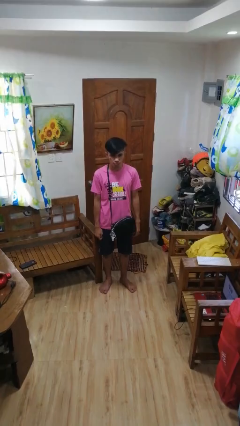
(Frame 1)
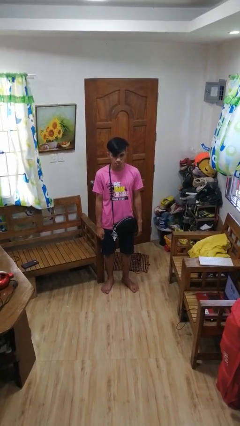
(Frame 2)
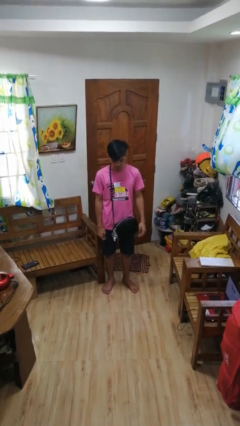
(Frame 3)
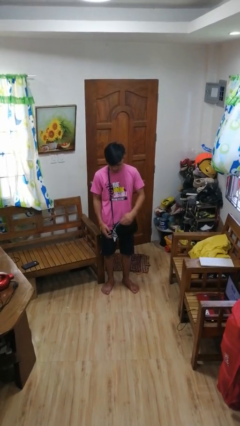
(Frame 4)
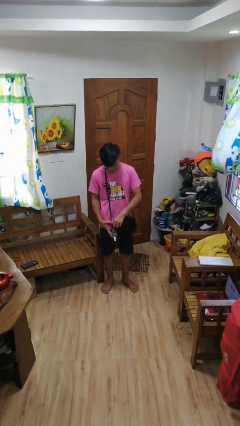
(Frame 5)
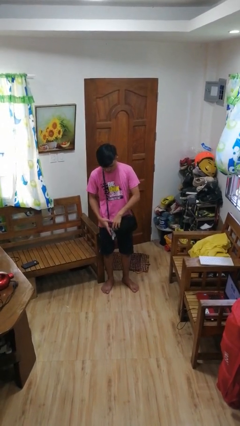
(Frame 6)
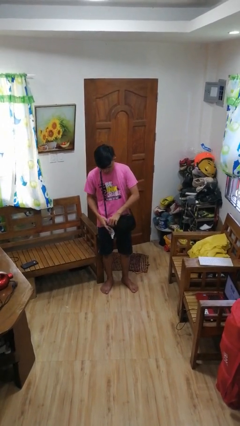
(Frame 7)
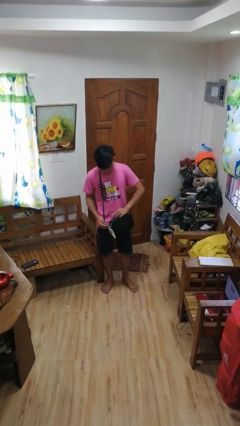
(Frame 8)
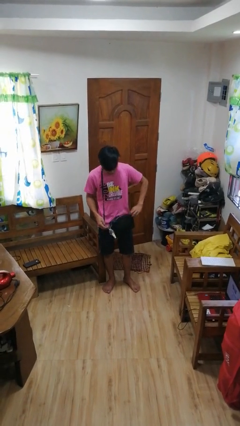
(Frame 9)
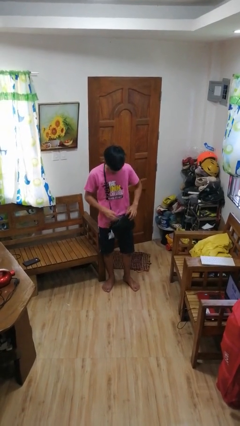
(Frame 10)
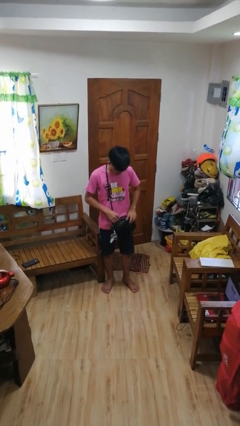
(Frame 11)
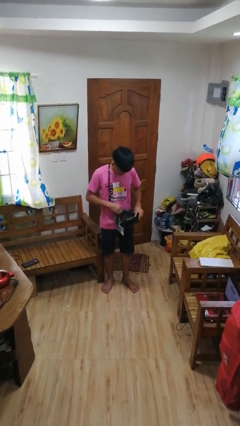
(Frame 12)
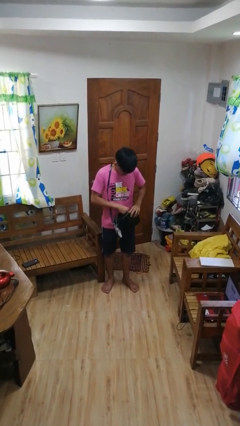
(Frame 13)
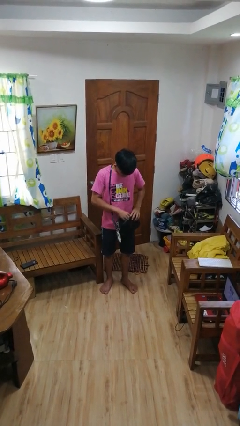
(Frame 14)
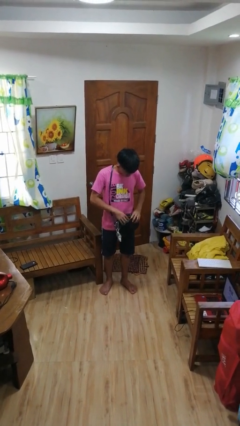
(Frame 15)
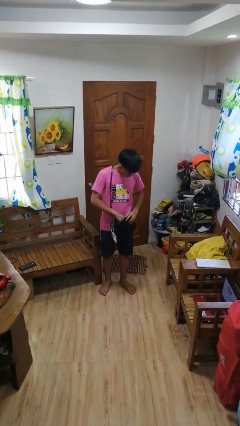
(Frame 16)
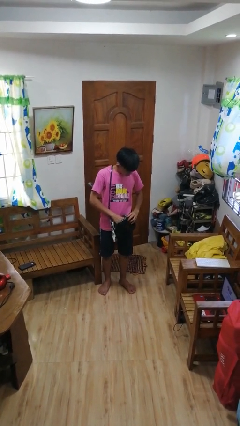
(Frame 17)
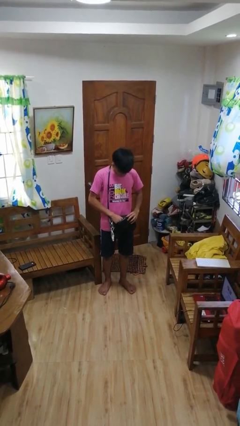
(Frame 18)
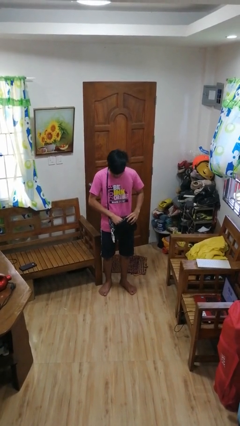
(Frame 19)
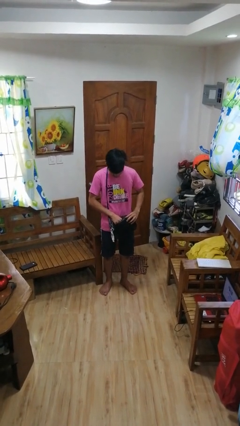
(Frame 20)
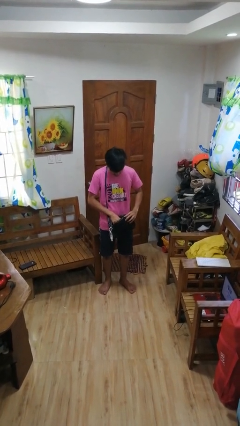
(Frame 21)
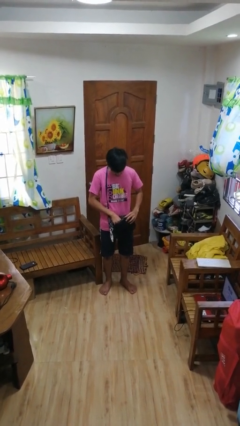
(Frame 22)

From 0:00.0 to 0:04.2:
person searches in purse

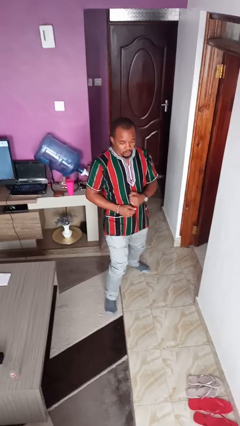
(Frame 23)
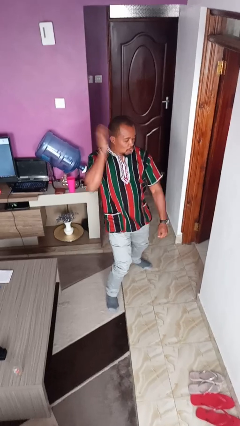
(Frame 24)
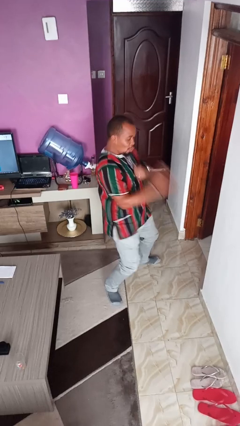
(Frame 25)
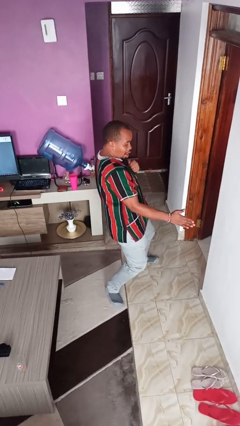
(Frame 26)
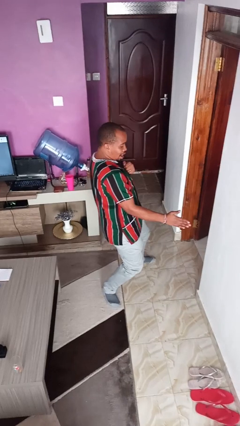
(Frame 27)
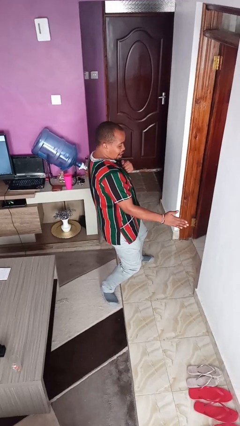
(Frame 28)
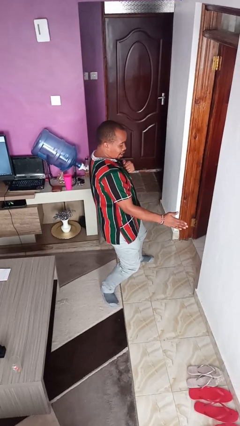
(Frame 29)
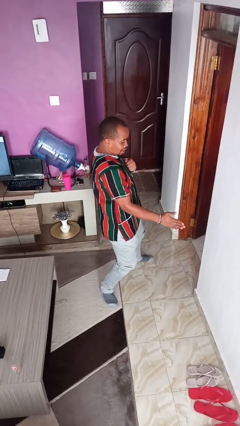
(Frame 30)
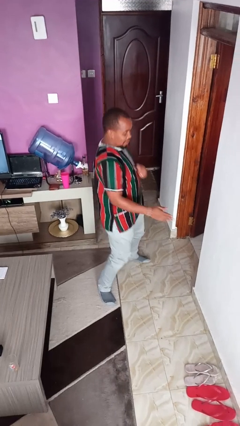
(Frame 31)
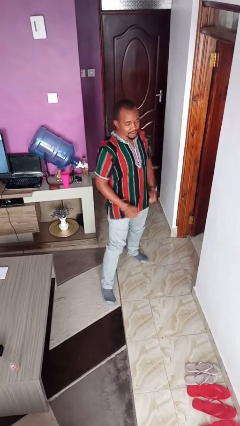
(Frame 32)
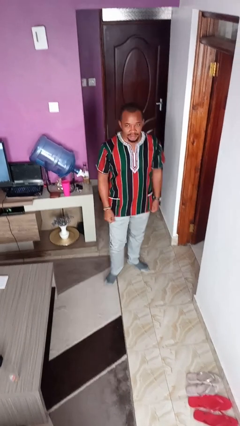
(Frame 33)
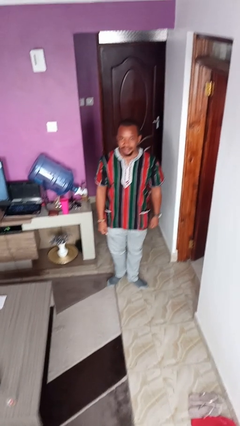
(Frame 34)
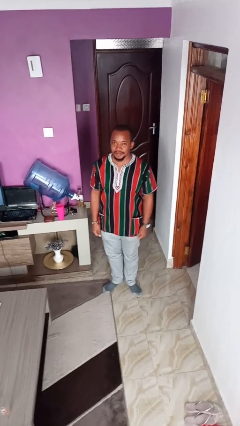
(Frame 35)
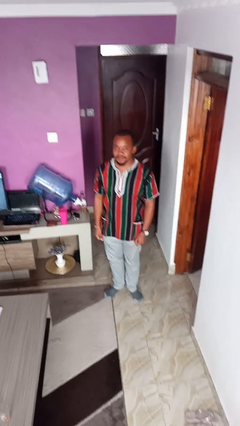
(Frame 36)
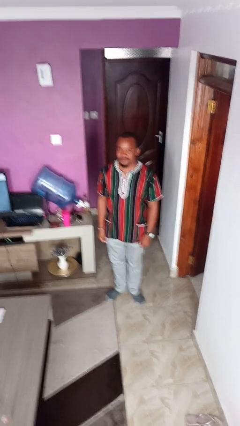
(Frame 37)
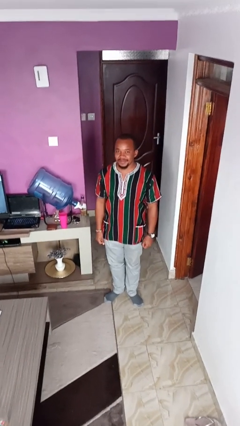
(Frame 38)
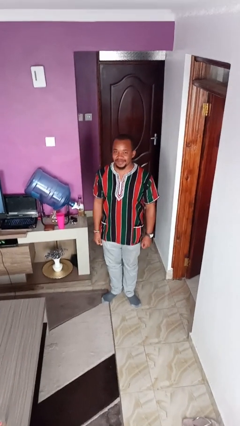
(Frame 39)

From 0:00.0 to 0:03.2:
person karate chop

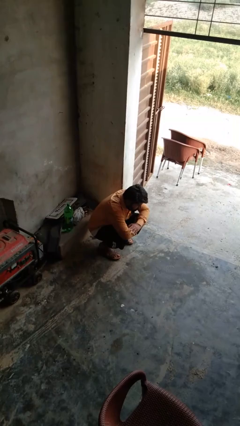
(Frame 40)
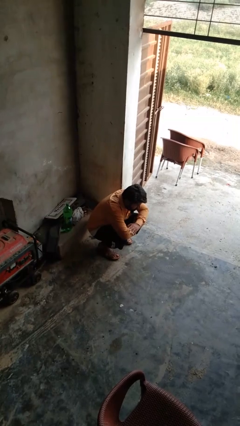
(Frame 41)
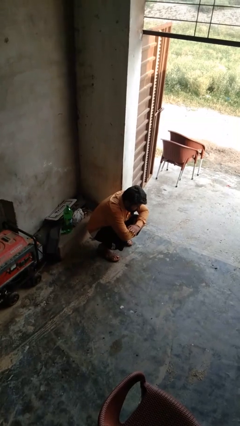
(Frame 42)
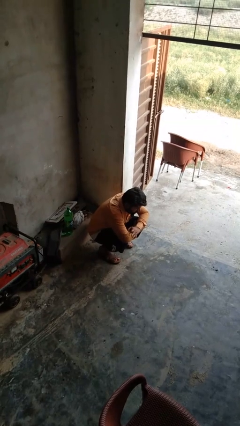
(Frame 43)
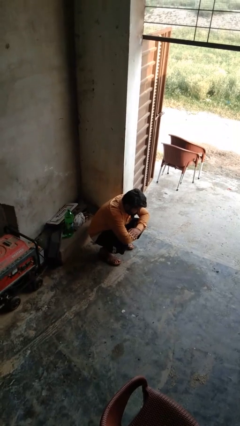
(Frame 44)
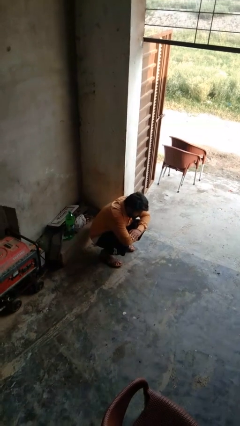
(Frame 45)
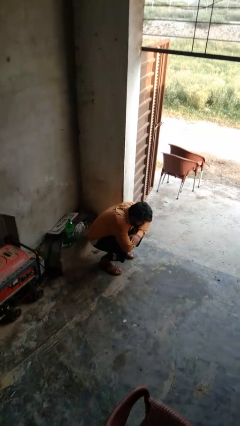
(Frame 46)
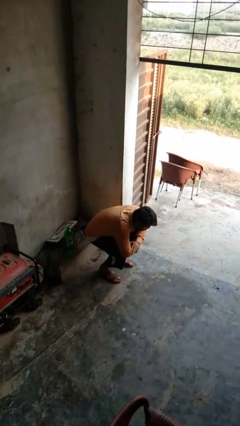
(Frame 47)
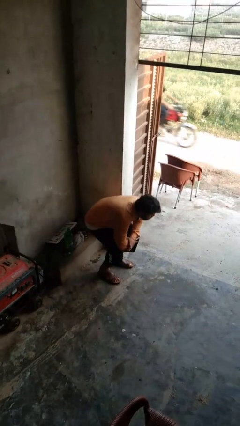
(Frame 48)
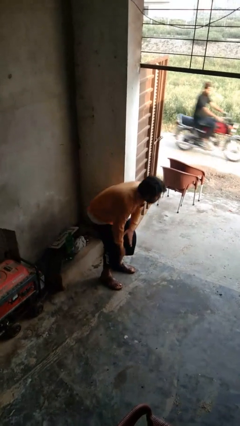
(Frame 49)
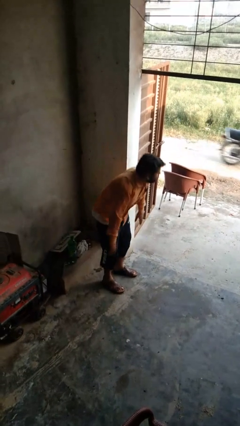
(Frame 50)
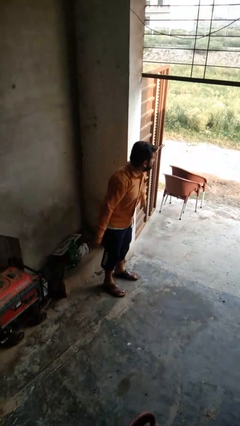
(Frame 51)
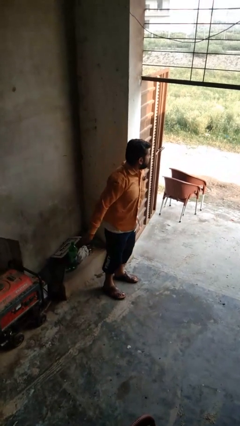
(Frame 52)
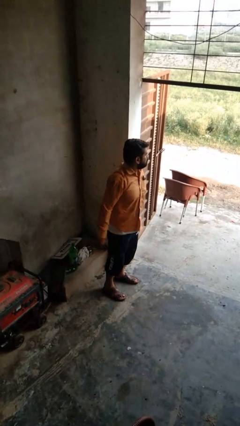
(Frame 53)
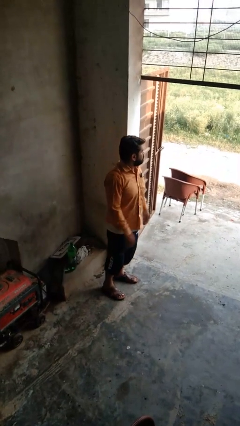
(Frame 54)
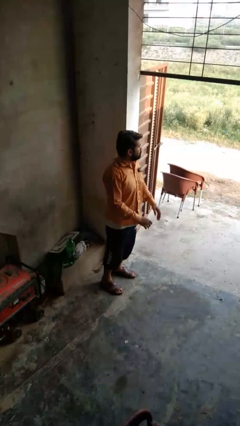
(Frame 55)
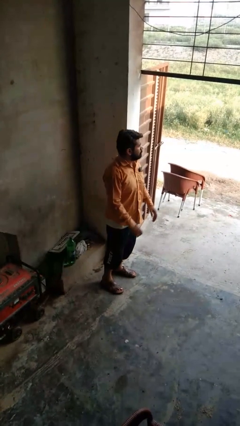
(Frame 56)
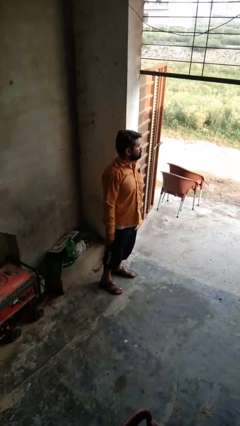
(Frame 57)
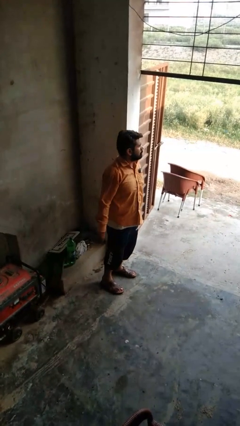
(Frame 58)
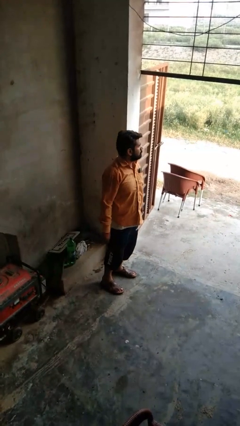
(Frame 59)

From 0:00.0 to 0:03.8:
person stands up

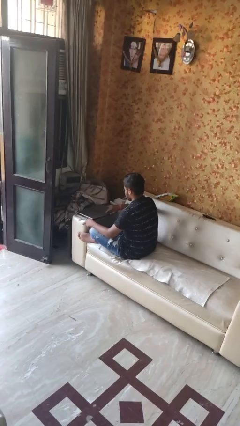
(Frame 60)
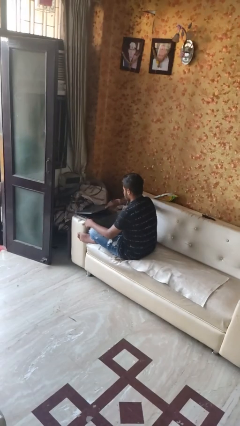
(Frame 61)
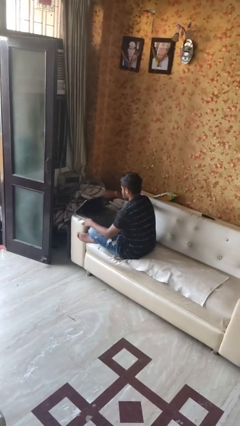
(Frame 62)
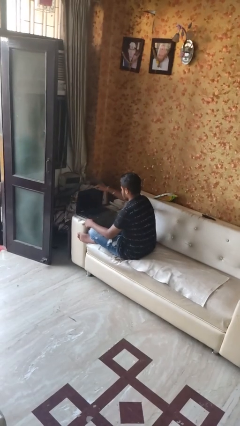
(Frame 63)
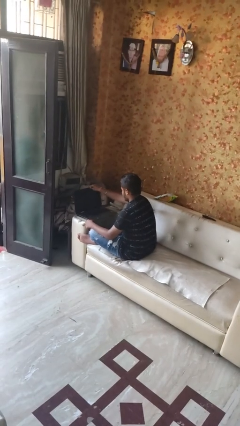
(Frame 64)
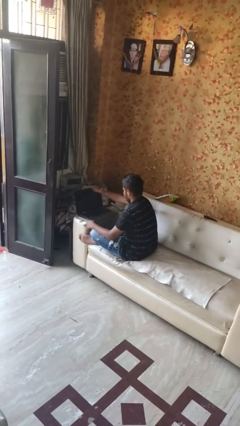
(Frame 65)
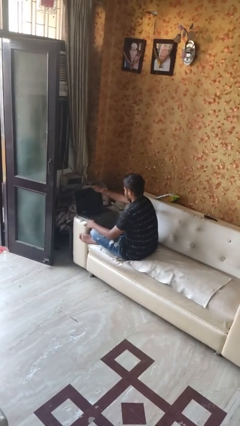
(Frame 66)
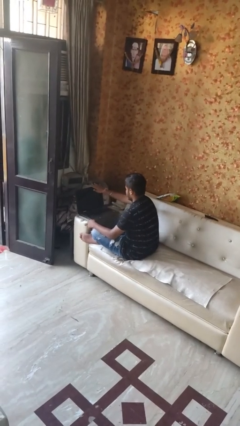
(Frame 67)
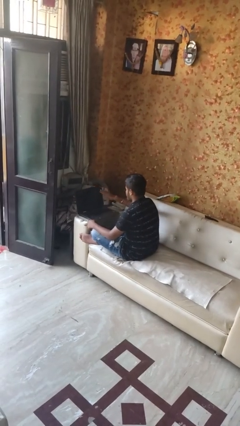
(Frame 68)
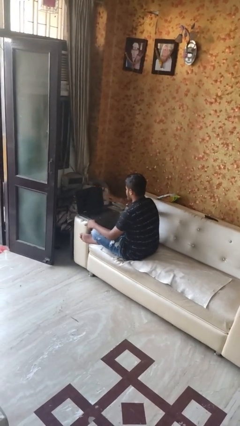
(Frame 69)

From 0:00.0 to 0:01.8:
person opens laptop

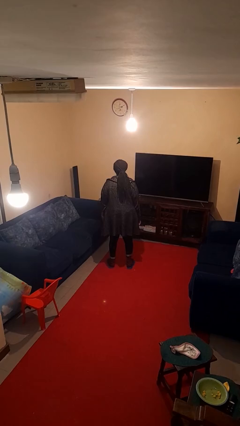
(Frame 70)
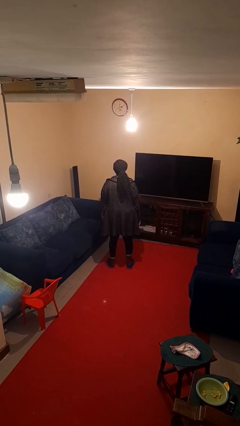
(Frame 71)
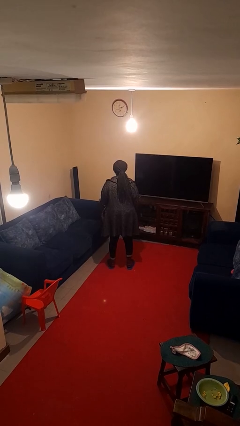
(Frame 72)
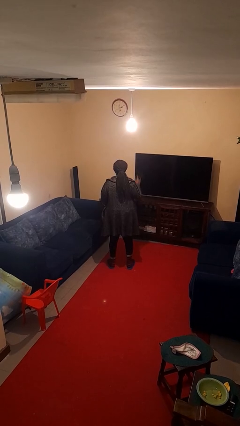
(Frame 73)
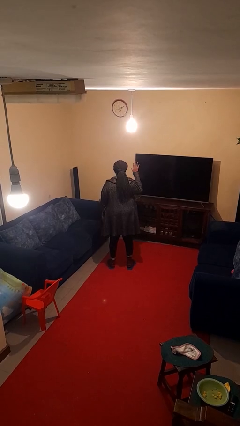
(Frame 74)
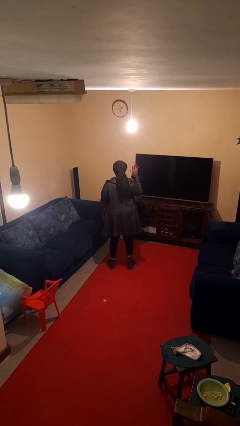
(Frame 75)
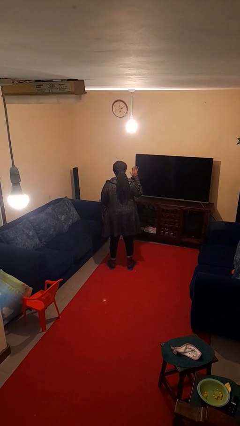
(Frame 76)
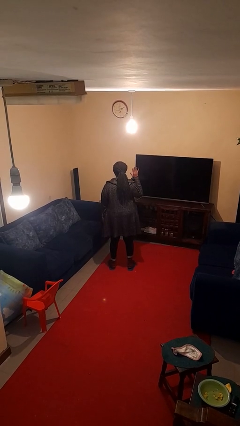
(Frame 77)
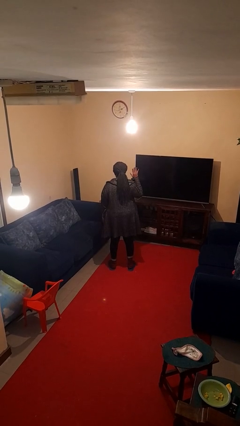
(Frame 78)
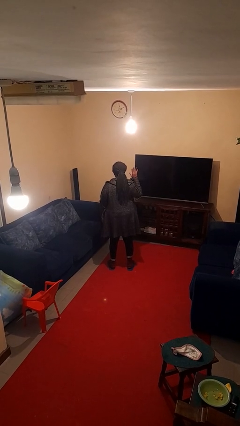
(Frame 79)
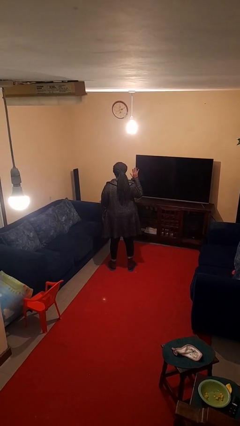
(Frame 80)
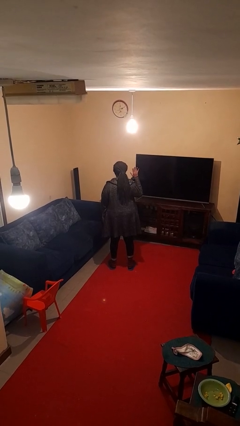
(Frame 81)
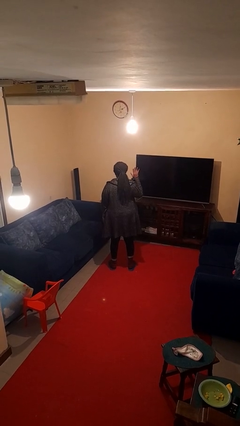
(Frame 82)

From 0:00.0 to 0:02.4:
person gestures number five

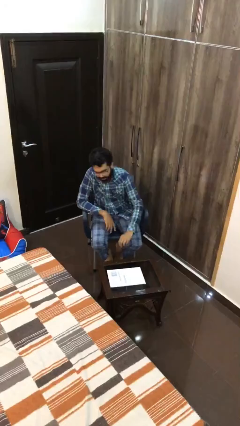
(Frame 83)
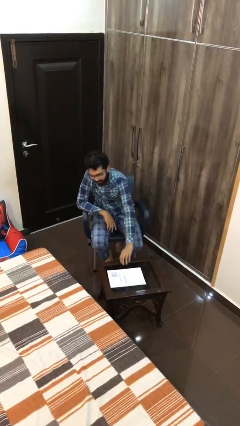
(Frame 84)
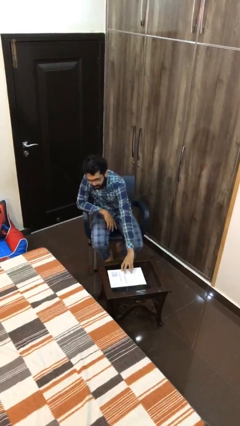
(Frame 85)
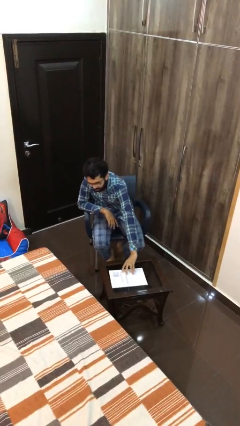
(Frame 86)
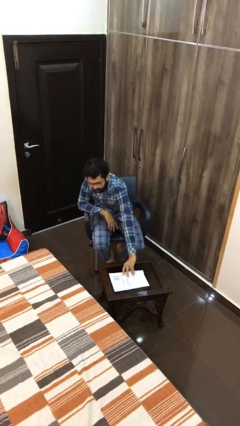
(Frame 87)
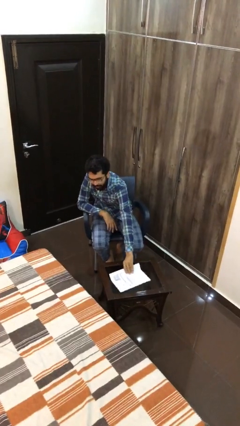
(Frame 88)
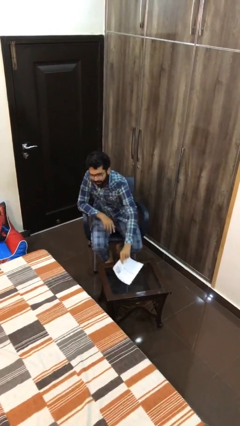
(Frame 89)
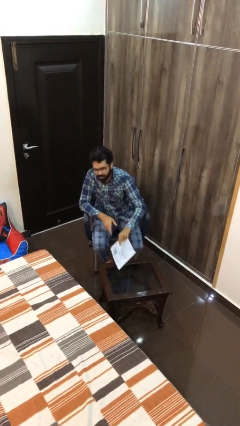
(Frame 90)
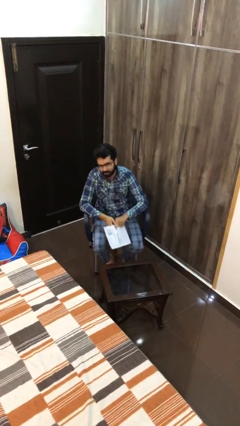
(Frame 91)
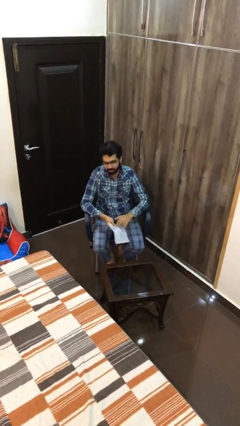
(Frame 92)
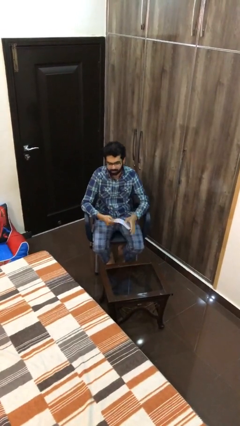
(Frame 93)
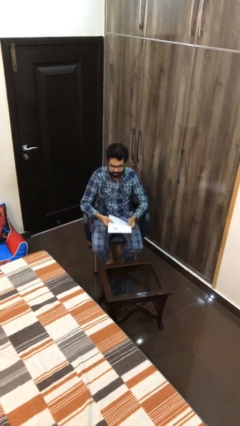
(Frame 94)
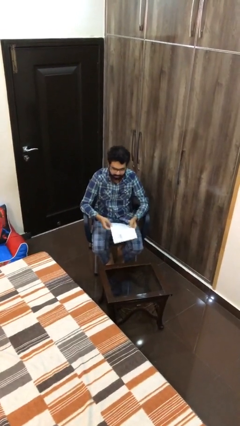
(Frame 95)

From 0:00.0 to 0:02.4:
person picks up object from table
